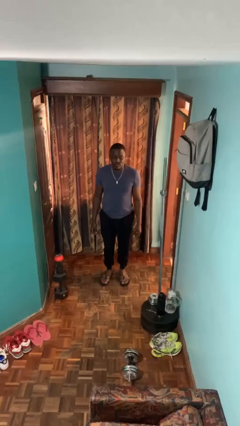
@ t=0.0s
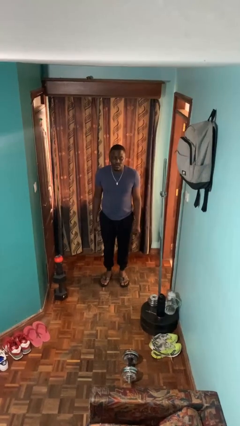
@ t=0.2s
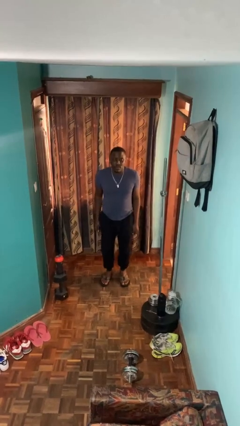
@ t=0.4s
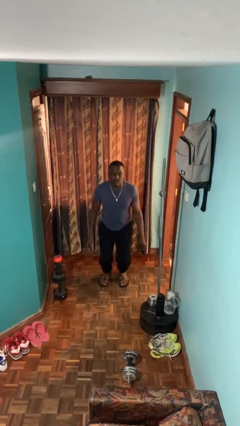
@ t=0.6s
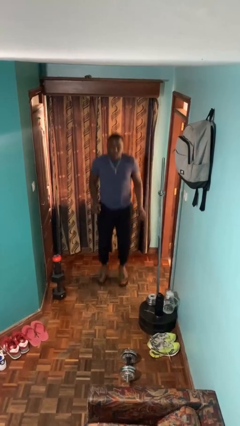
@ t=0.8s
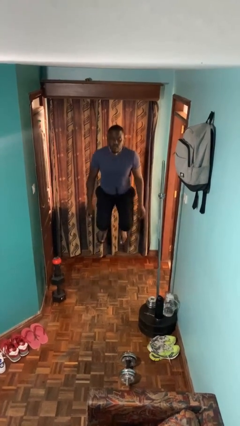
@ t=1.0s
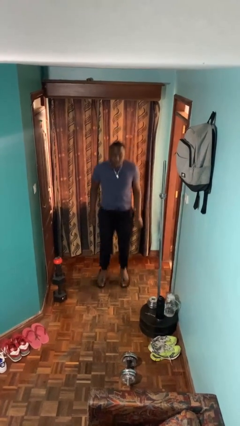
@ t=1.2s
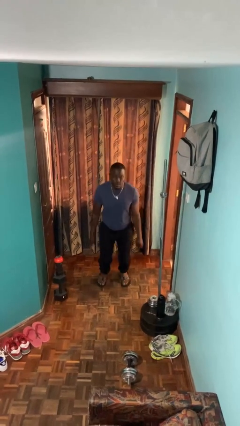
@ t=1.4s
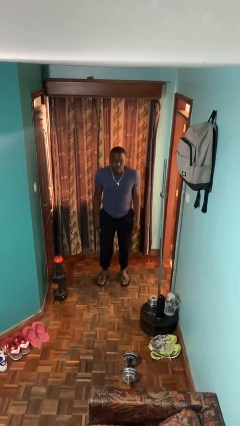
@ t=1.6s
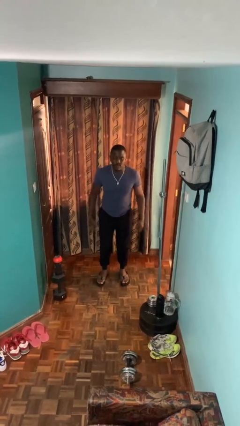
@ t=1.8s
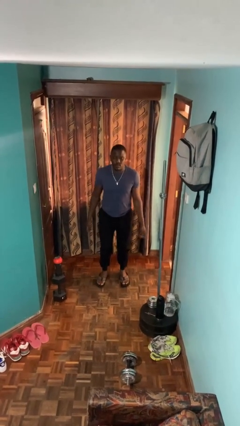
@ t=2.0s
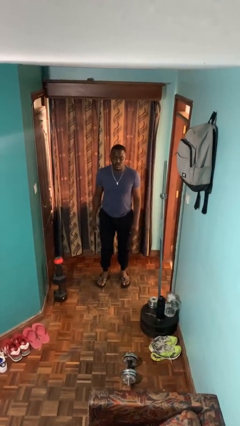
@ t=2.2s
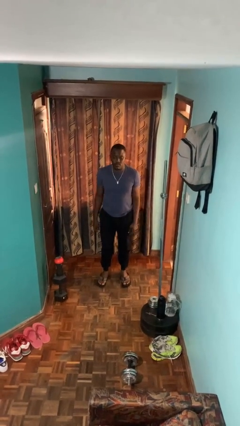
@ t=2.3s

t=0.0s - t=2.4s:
person jumps

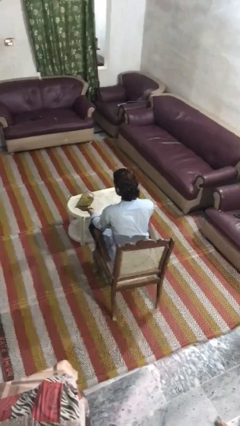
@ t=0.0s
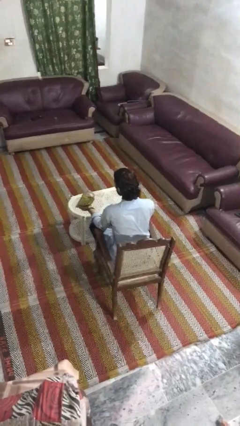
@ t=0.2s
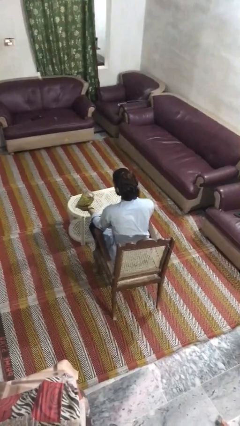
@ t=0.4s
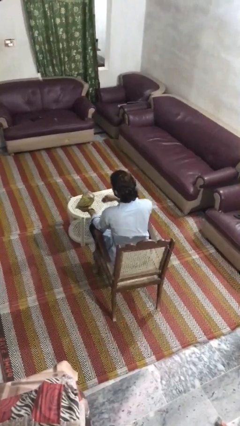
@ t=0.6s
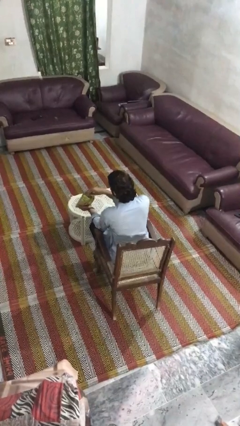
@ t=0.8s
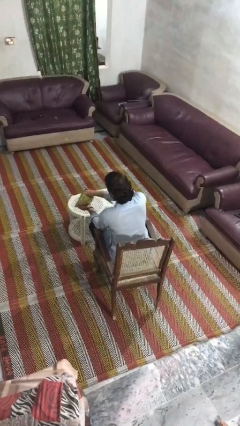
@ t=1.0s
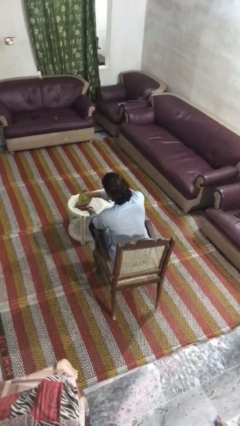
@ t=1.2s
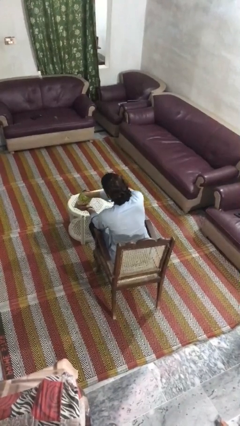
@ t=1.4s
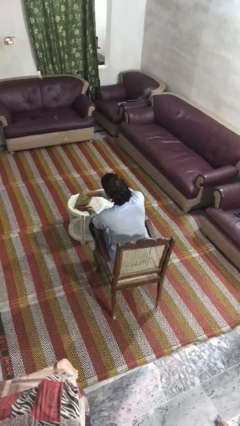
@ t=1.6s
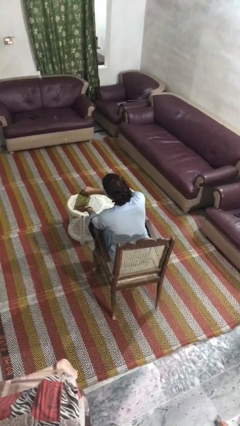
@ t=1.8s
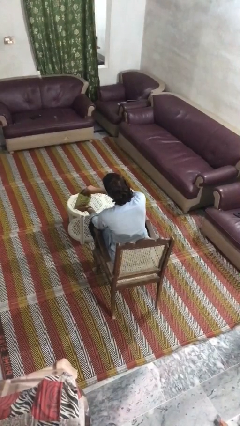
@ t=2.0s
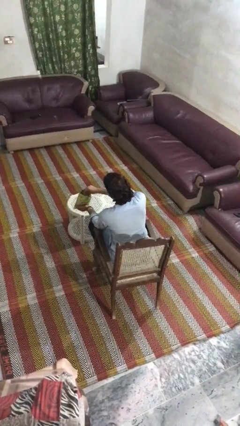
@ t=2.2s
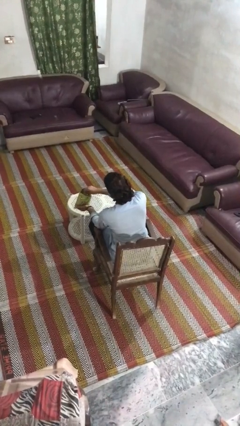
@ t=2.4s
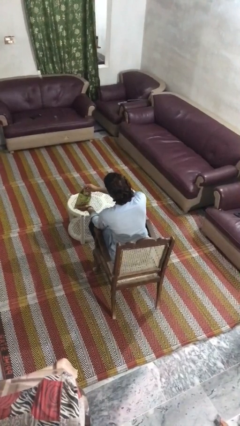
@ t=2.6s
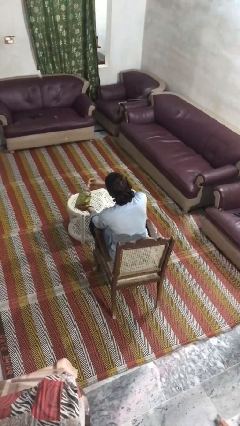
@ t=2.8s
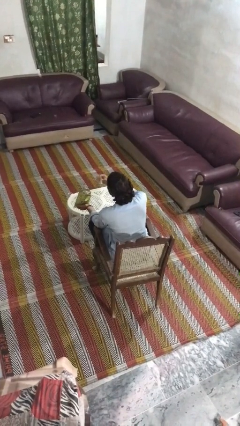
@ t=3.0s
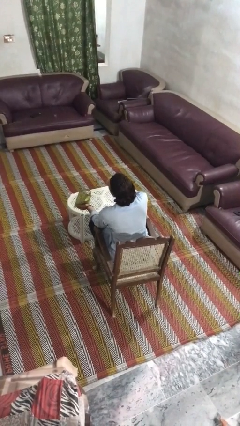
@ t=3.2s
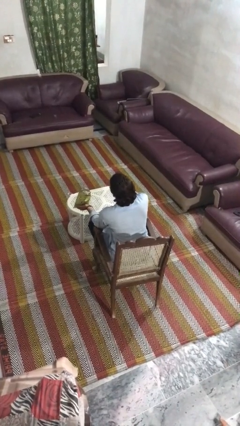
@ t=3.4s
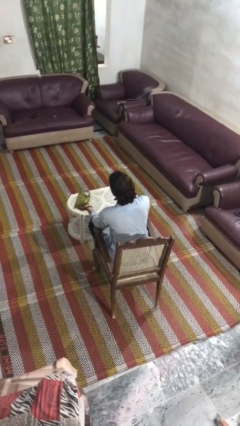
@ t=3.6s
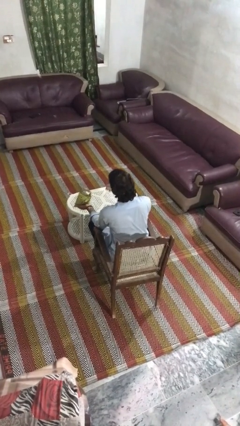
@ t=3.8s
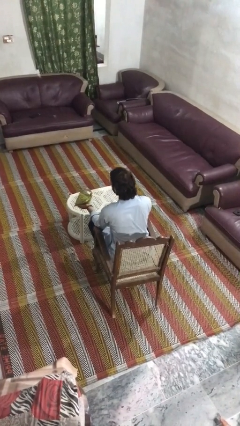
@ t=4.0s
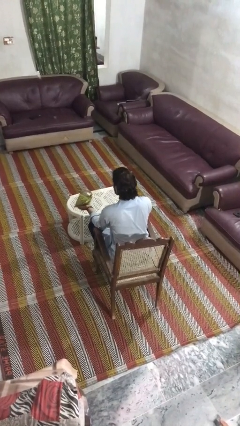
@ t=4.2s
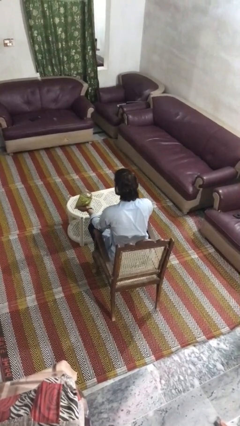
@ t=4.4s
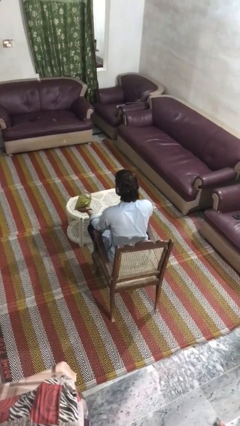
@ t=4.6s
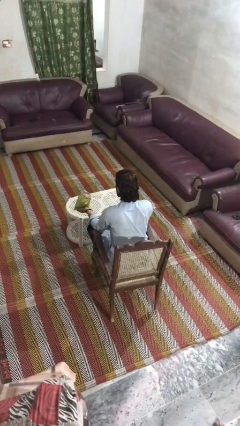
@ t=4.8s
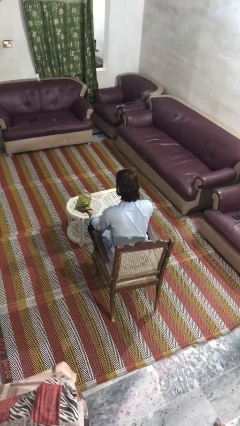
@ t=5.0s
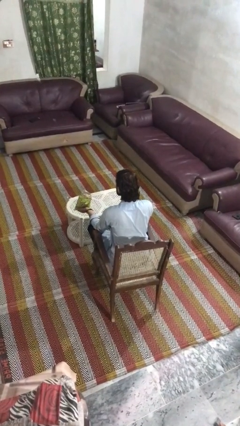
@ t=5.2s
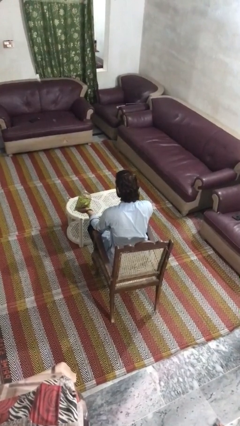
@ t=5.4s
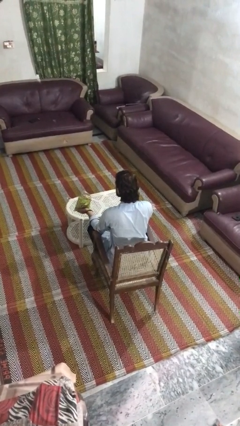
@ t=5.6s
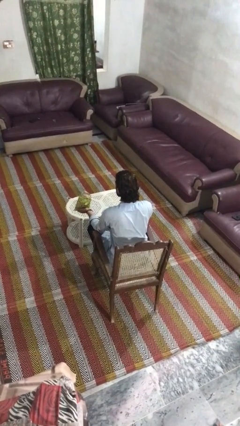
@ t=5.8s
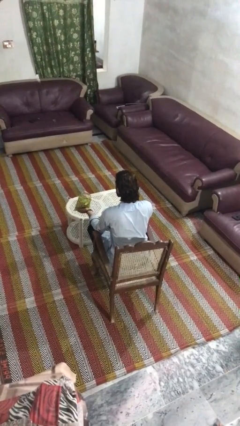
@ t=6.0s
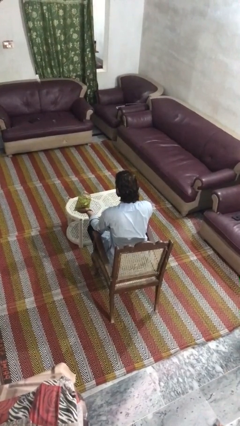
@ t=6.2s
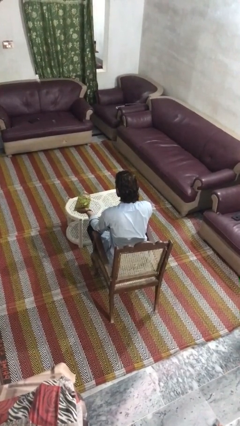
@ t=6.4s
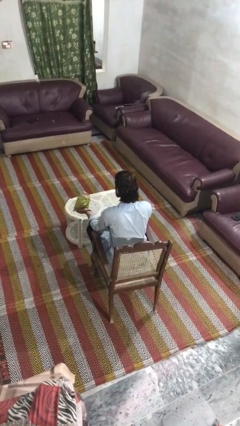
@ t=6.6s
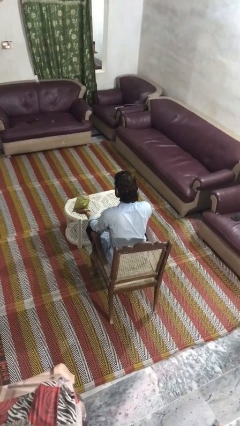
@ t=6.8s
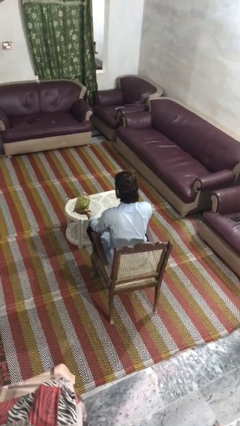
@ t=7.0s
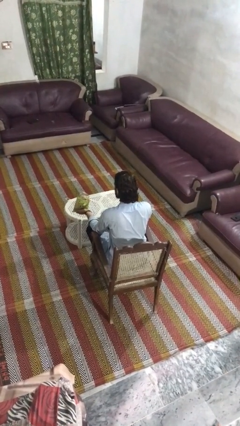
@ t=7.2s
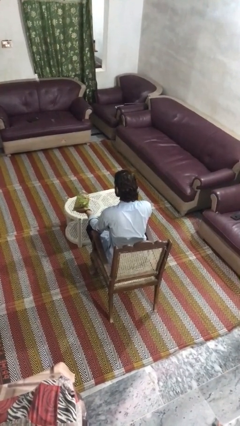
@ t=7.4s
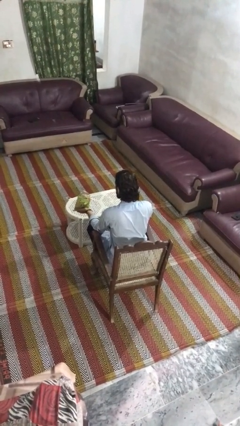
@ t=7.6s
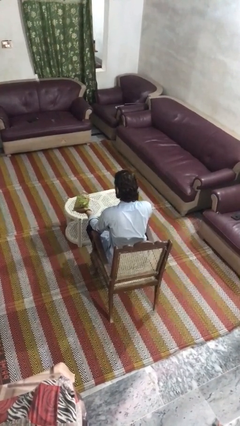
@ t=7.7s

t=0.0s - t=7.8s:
person eats snack from bag

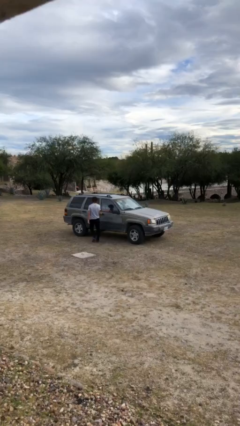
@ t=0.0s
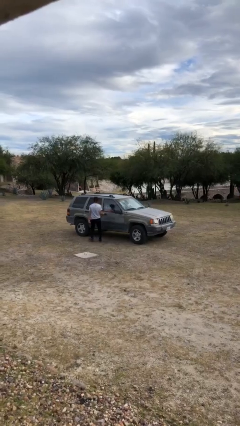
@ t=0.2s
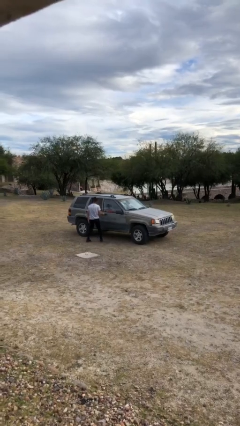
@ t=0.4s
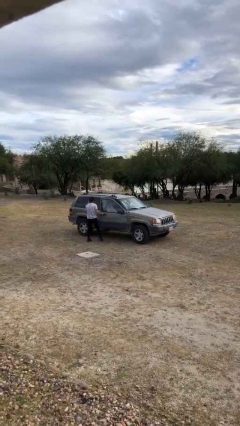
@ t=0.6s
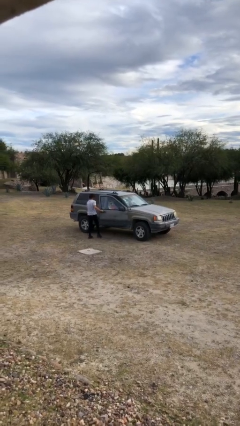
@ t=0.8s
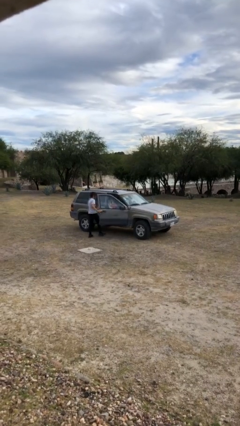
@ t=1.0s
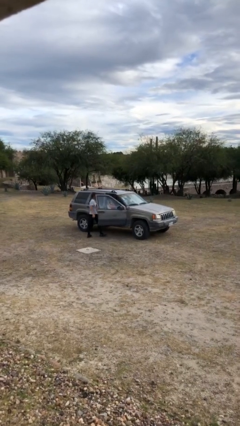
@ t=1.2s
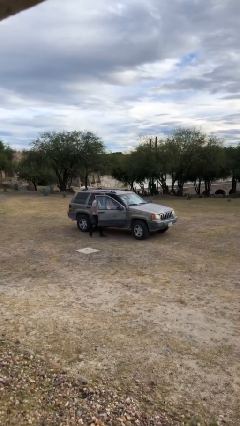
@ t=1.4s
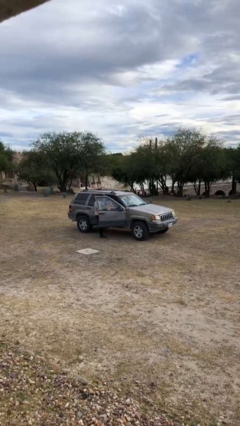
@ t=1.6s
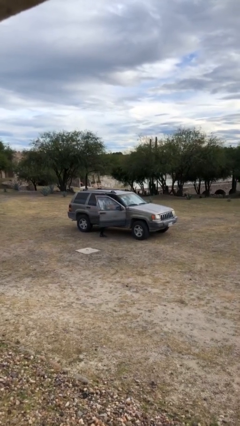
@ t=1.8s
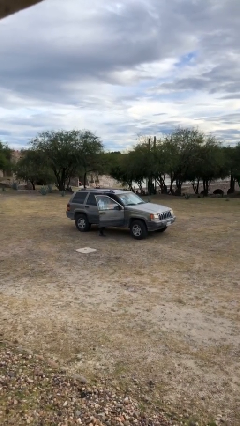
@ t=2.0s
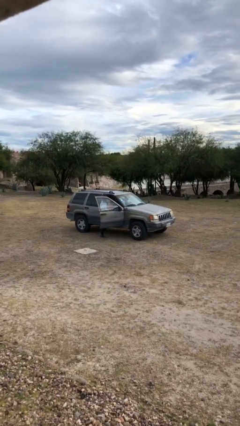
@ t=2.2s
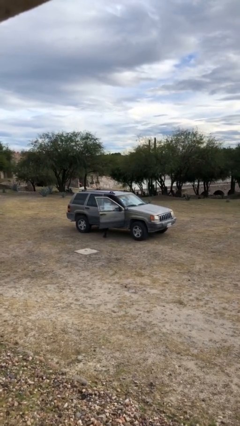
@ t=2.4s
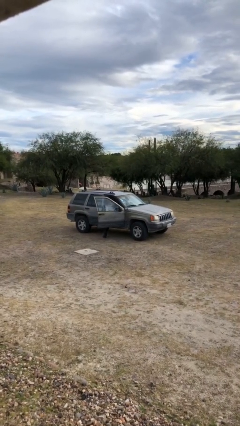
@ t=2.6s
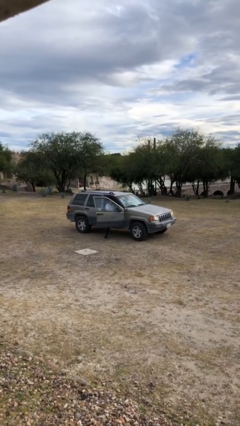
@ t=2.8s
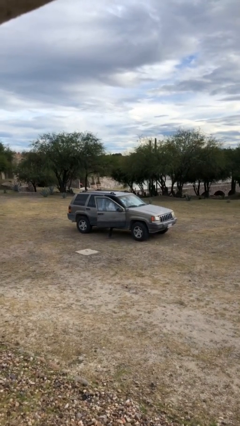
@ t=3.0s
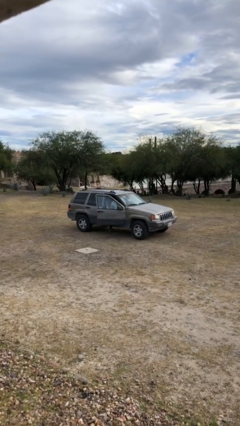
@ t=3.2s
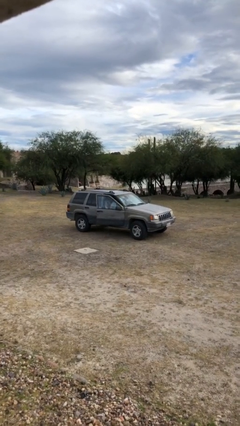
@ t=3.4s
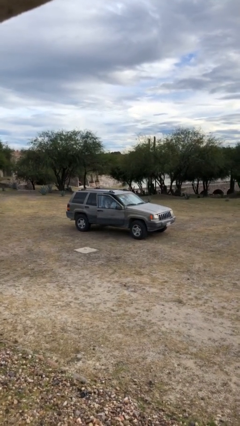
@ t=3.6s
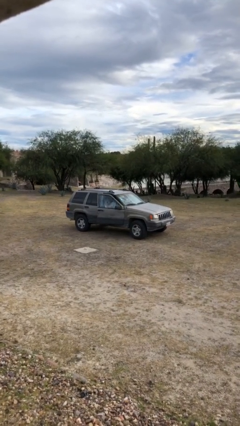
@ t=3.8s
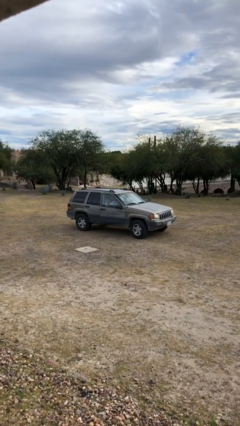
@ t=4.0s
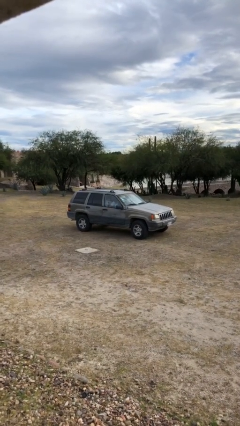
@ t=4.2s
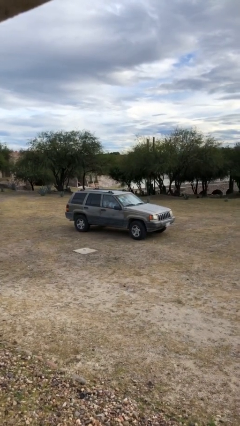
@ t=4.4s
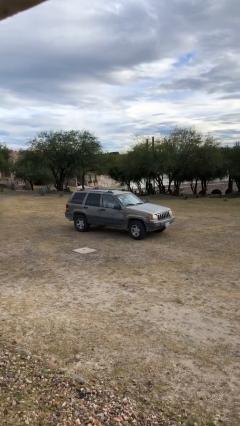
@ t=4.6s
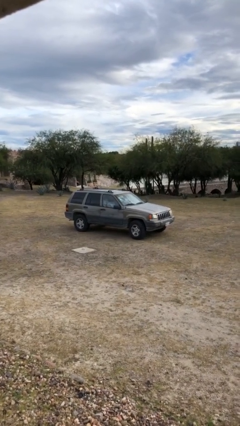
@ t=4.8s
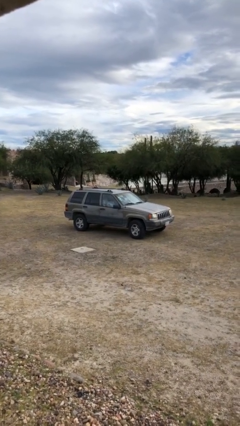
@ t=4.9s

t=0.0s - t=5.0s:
car picks up person

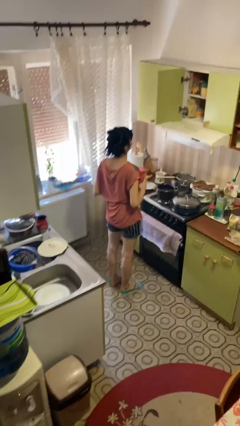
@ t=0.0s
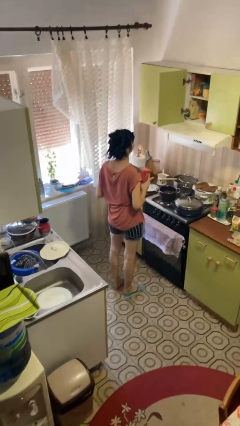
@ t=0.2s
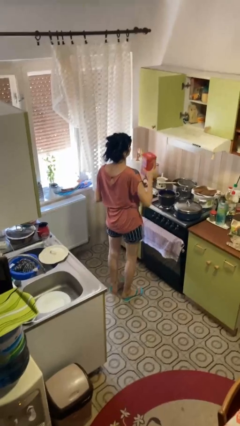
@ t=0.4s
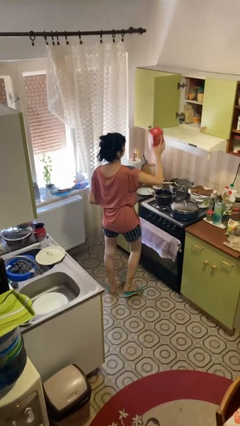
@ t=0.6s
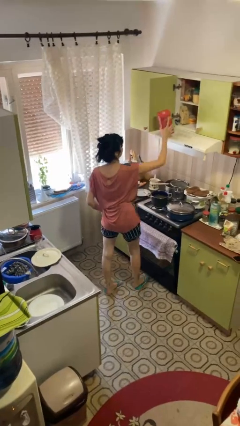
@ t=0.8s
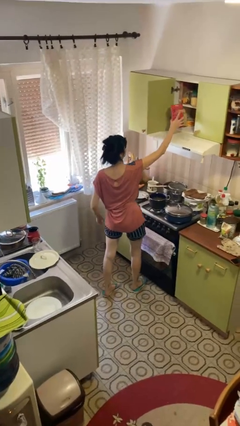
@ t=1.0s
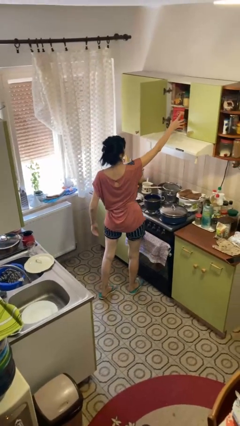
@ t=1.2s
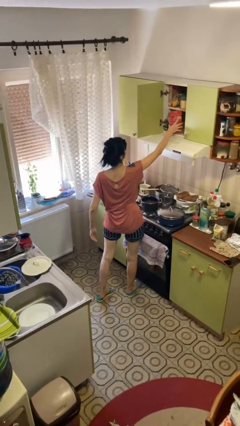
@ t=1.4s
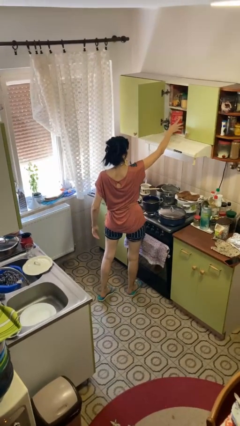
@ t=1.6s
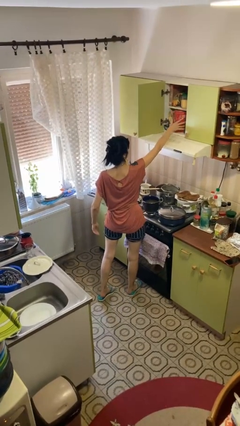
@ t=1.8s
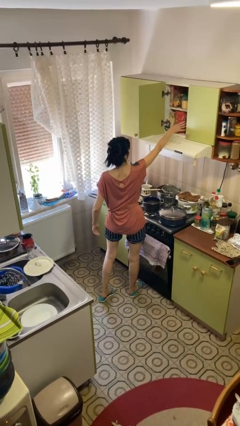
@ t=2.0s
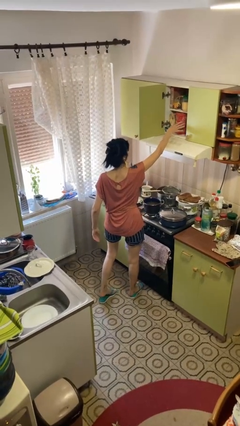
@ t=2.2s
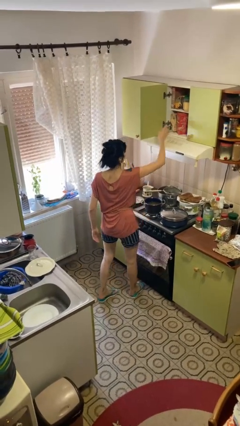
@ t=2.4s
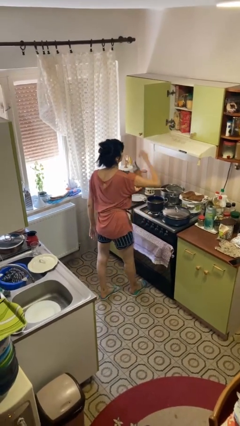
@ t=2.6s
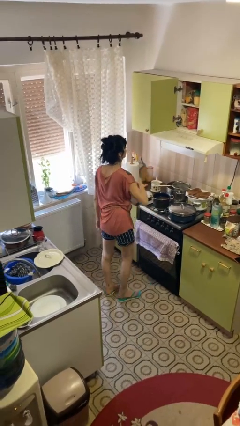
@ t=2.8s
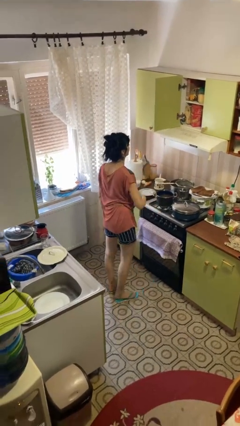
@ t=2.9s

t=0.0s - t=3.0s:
person puts down object into cabinet
